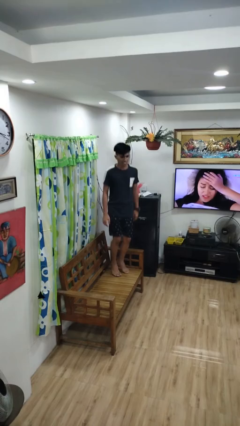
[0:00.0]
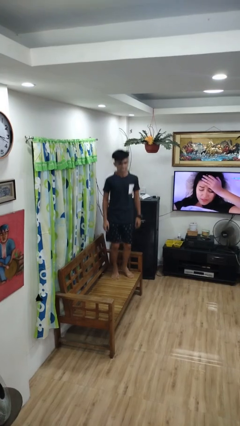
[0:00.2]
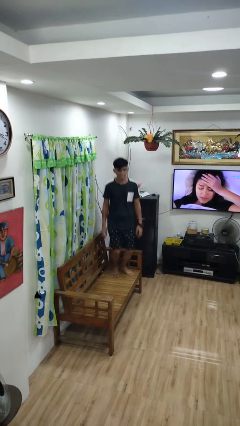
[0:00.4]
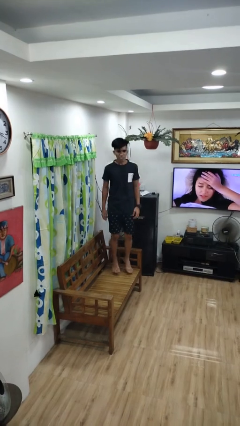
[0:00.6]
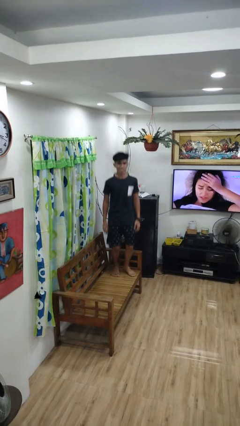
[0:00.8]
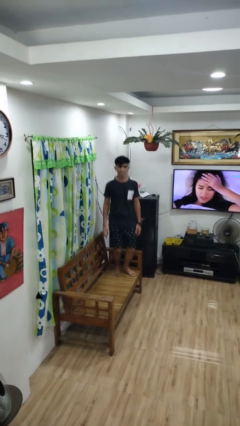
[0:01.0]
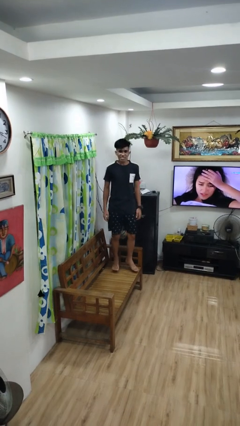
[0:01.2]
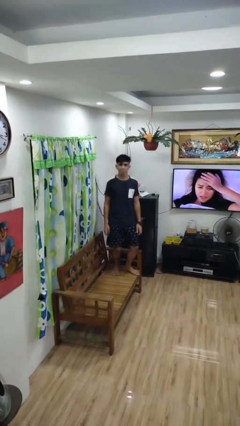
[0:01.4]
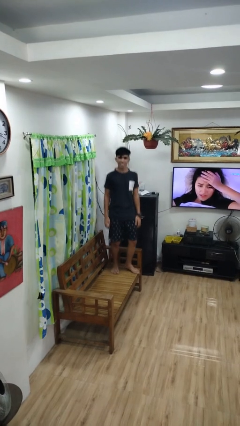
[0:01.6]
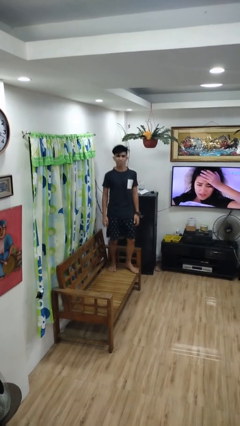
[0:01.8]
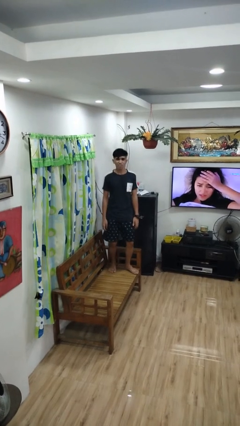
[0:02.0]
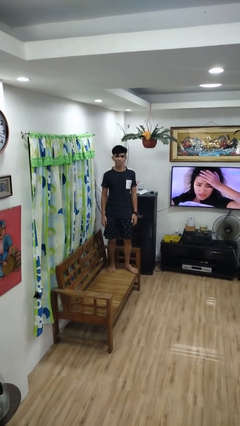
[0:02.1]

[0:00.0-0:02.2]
person jumps on couch

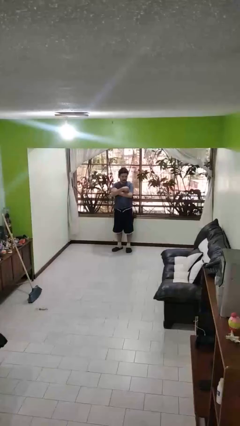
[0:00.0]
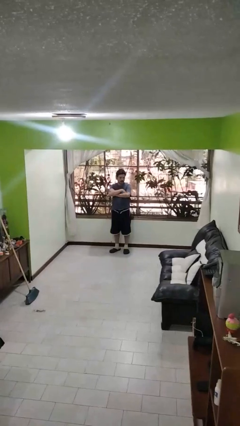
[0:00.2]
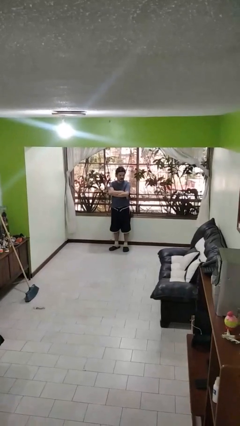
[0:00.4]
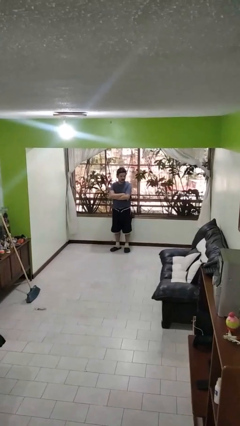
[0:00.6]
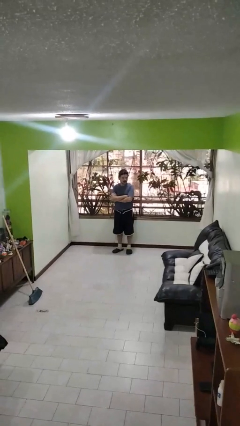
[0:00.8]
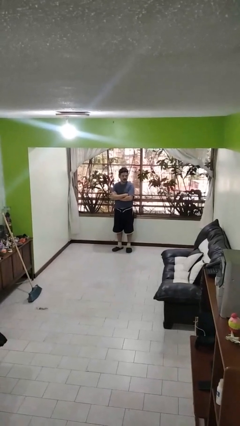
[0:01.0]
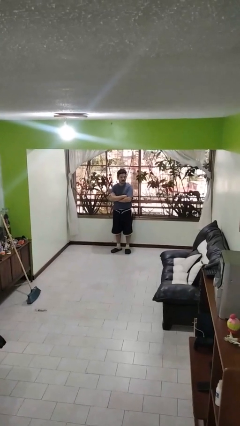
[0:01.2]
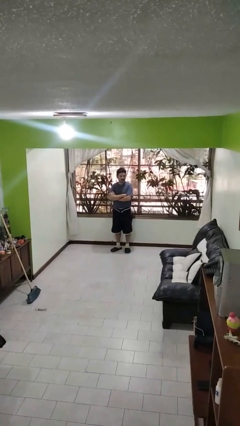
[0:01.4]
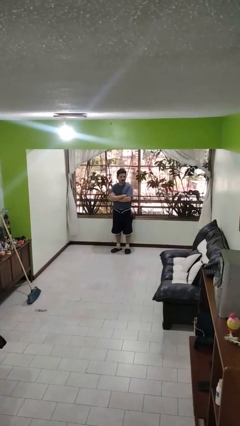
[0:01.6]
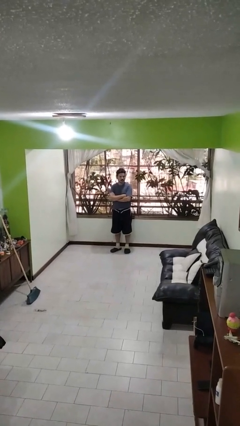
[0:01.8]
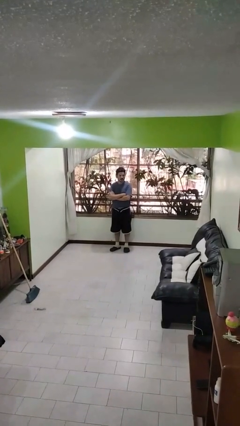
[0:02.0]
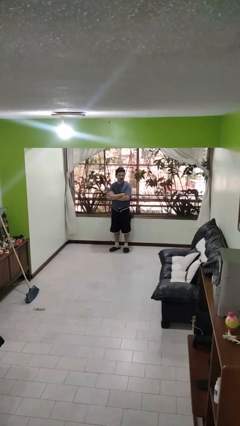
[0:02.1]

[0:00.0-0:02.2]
person crosses arms

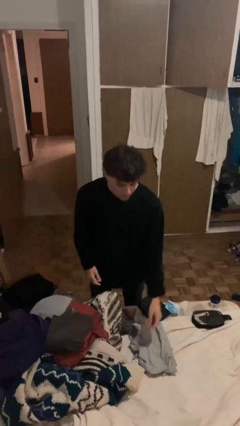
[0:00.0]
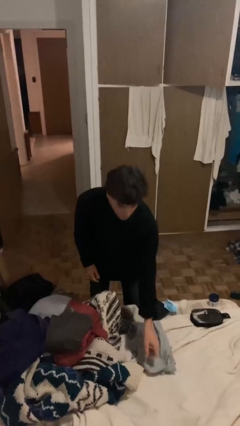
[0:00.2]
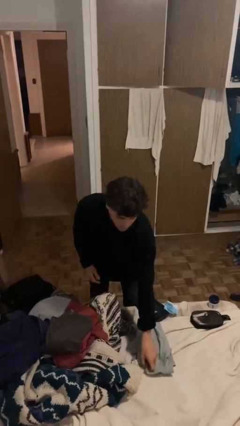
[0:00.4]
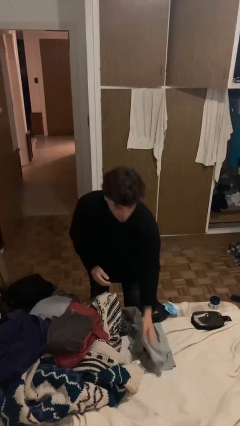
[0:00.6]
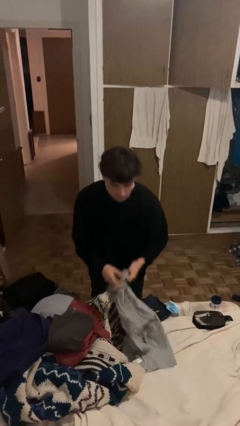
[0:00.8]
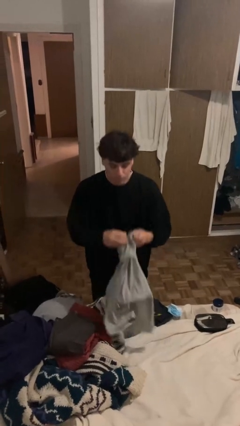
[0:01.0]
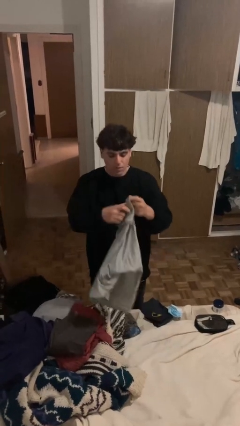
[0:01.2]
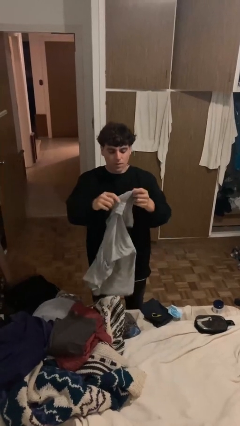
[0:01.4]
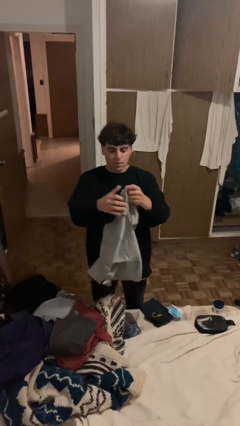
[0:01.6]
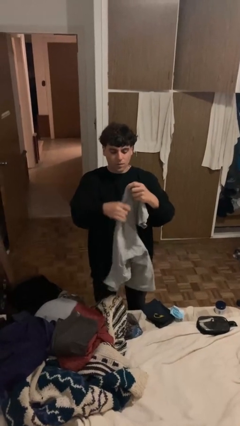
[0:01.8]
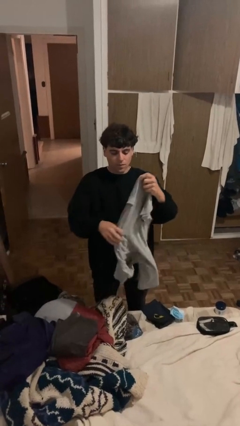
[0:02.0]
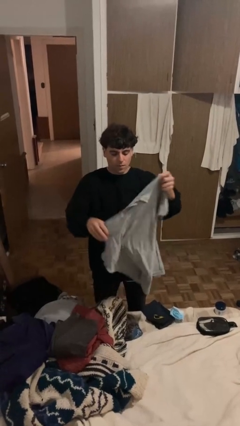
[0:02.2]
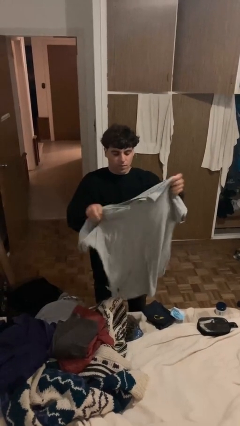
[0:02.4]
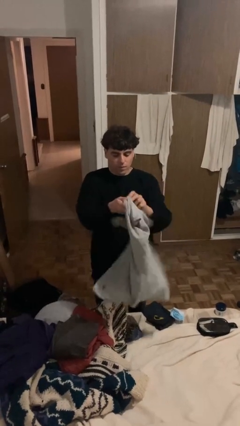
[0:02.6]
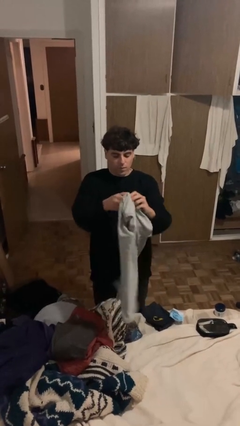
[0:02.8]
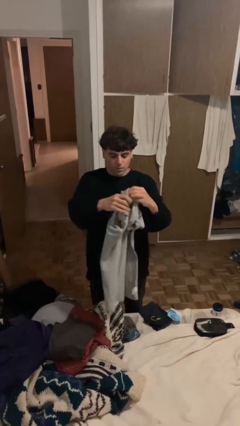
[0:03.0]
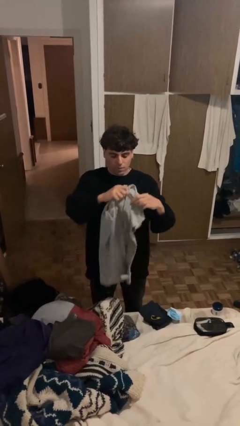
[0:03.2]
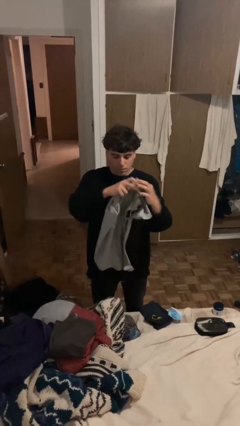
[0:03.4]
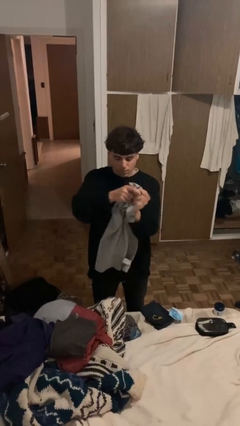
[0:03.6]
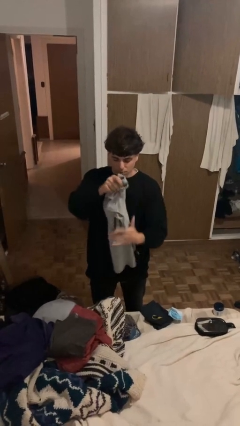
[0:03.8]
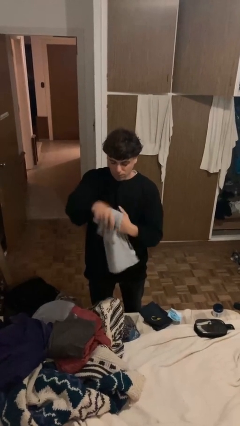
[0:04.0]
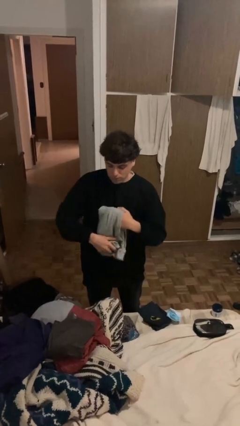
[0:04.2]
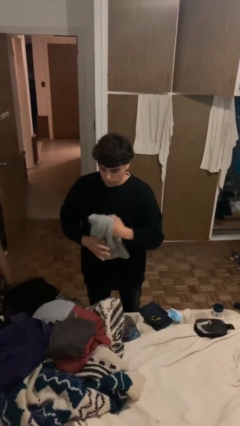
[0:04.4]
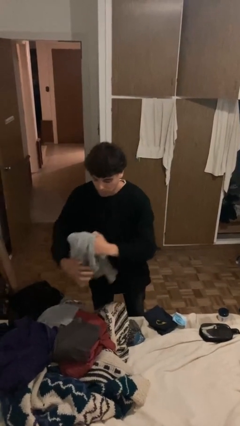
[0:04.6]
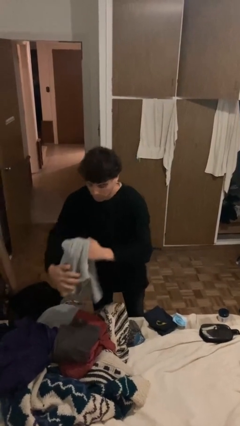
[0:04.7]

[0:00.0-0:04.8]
person folds shirt

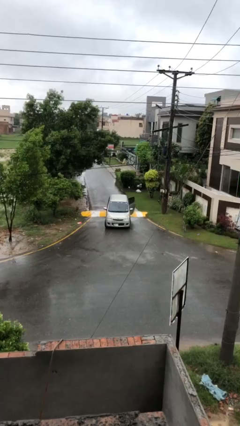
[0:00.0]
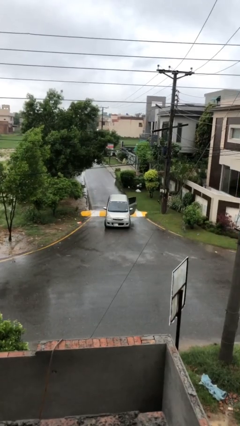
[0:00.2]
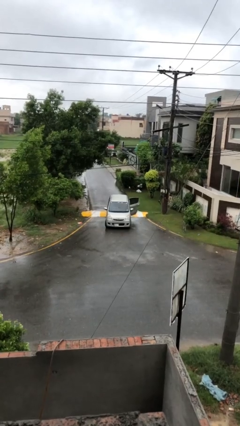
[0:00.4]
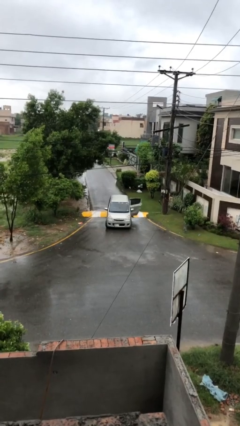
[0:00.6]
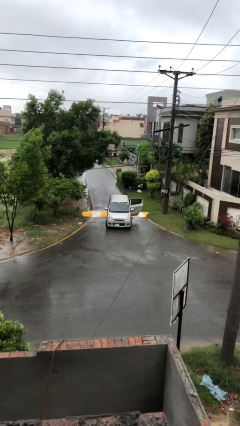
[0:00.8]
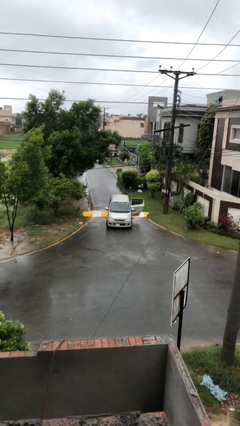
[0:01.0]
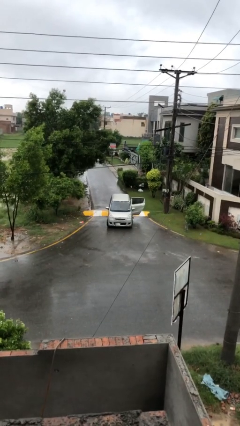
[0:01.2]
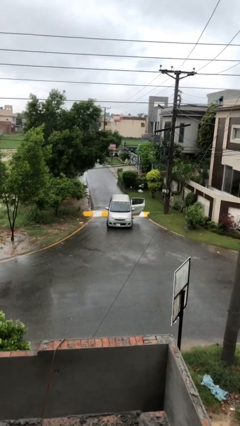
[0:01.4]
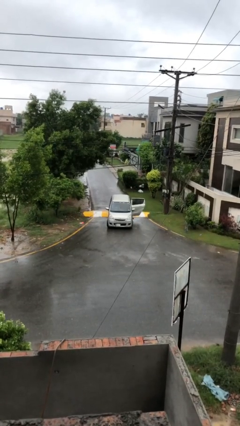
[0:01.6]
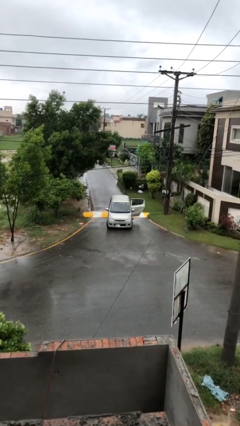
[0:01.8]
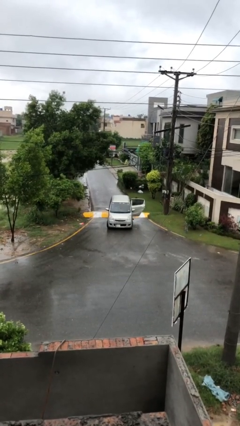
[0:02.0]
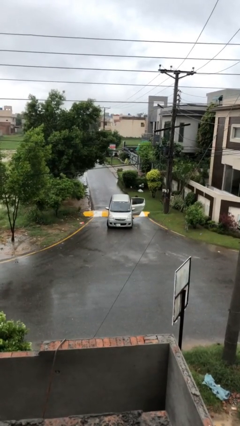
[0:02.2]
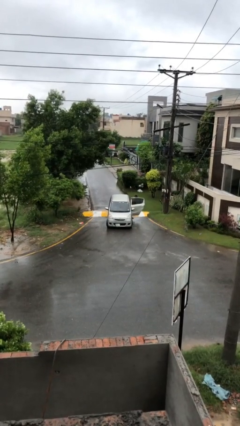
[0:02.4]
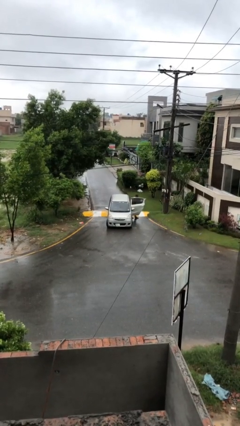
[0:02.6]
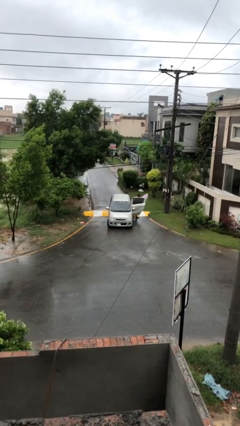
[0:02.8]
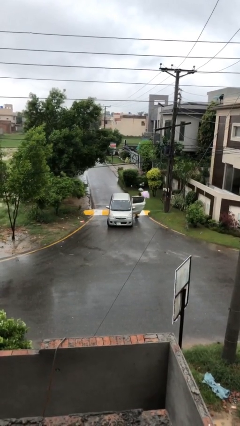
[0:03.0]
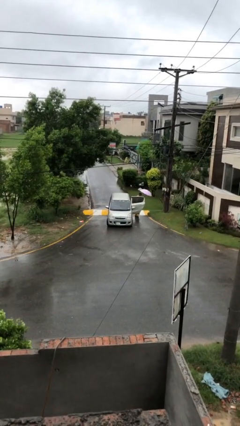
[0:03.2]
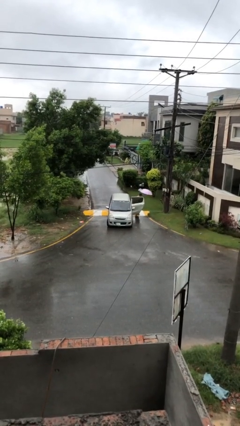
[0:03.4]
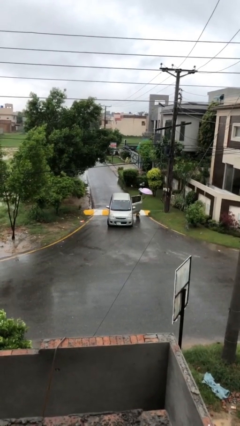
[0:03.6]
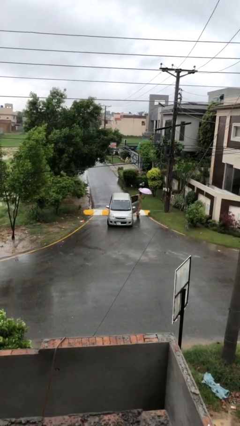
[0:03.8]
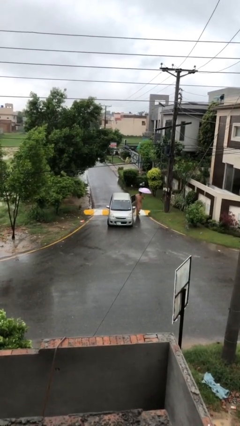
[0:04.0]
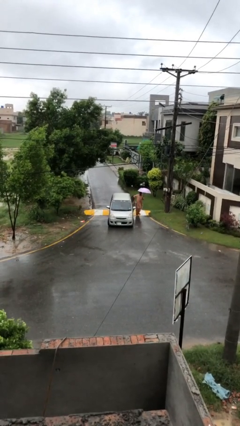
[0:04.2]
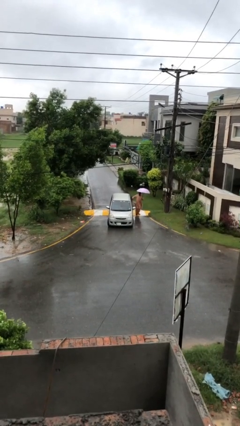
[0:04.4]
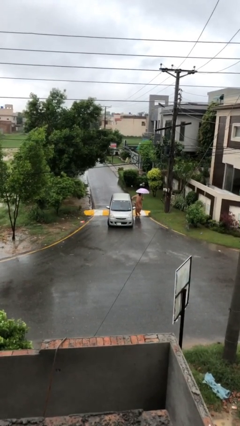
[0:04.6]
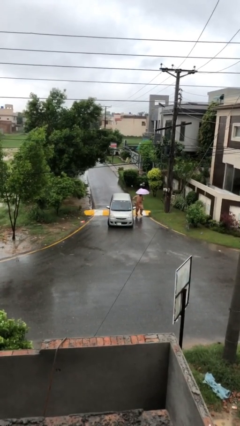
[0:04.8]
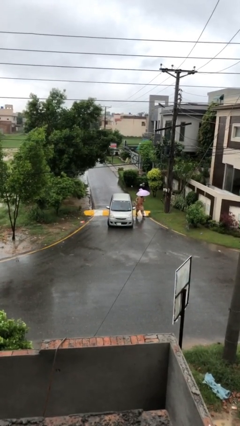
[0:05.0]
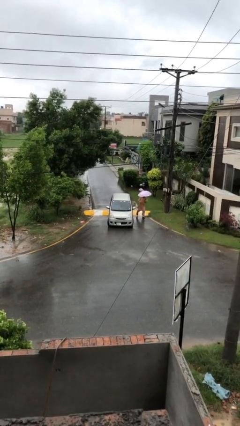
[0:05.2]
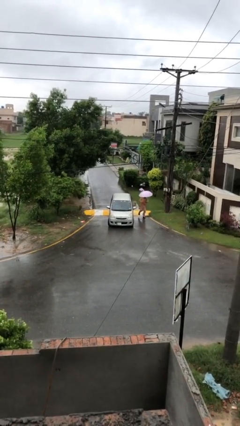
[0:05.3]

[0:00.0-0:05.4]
car drops off person

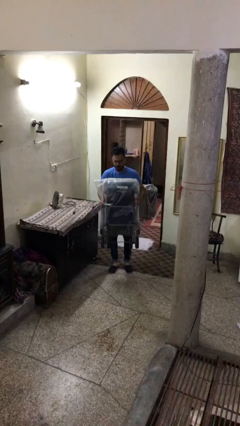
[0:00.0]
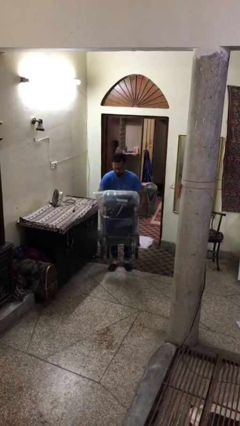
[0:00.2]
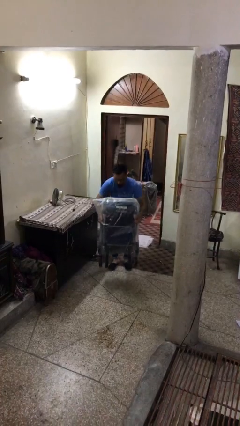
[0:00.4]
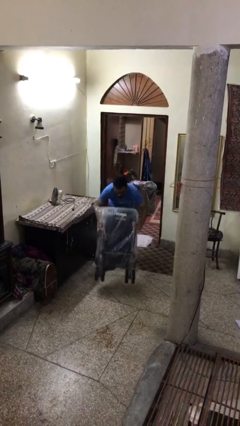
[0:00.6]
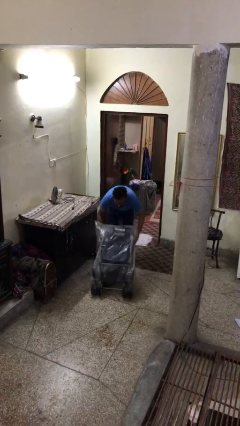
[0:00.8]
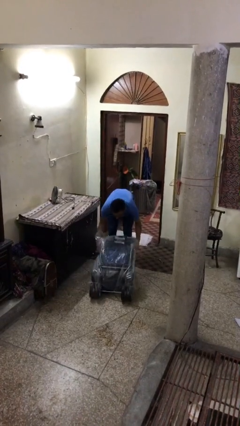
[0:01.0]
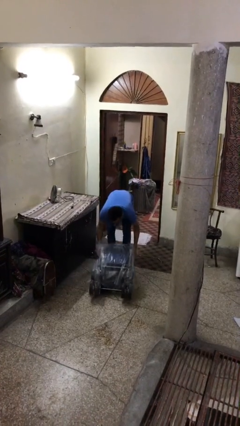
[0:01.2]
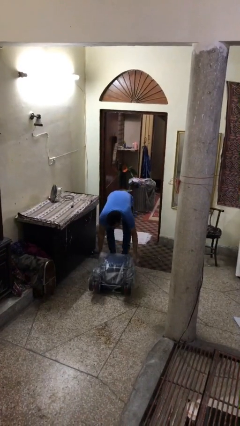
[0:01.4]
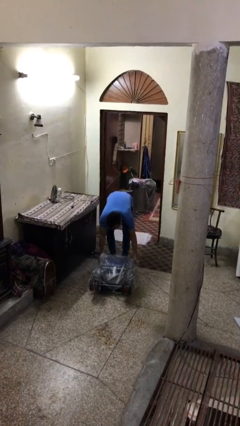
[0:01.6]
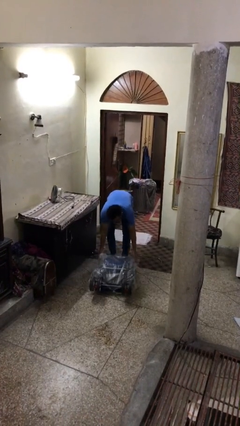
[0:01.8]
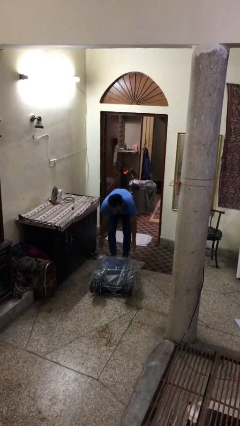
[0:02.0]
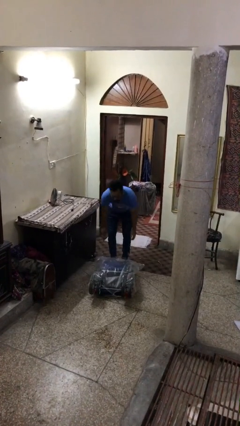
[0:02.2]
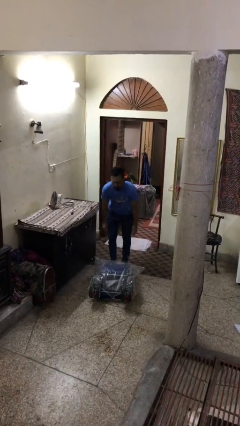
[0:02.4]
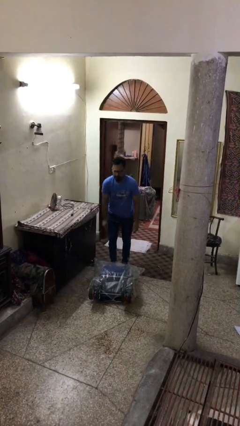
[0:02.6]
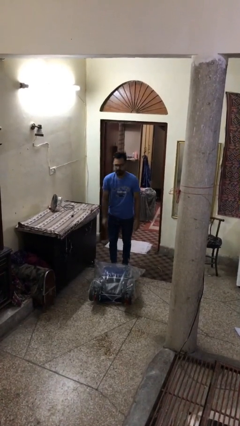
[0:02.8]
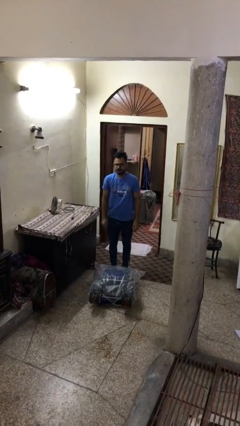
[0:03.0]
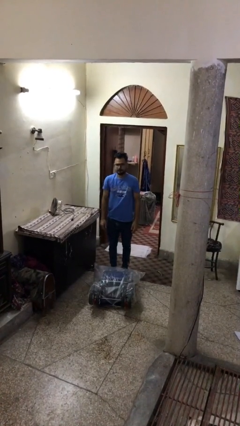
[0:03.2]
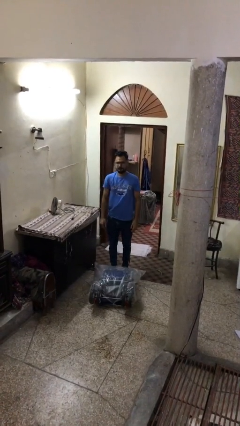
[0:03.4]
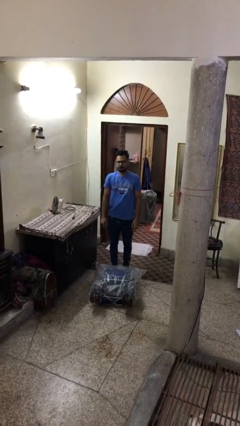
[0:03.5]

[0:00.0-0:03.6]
person puts down object on floor
